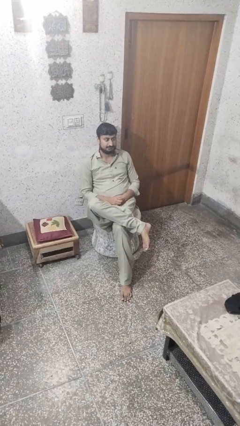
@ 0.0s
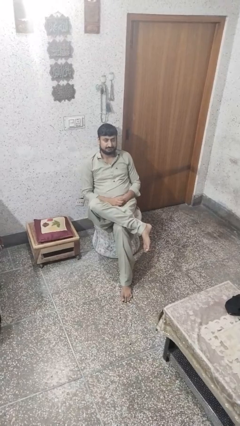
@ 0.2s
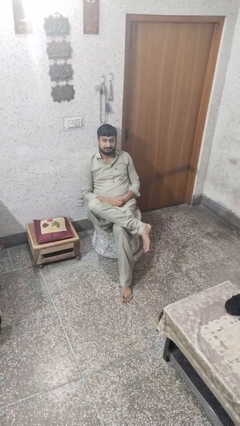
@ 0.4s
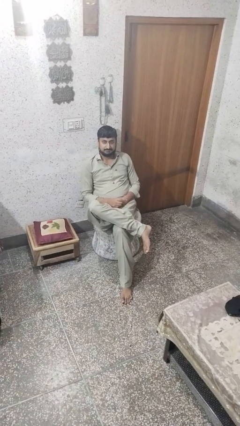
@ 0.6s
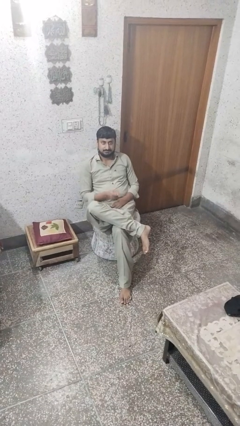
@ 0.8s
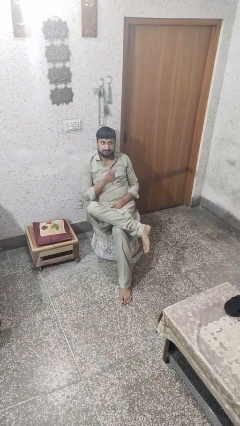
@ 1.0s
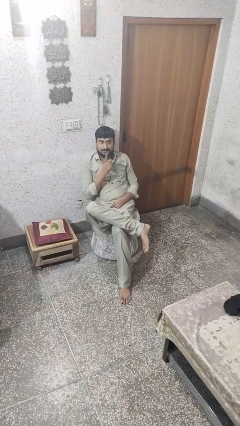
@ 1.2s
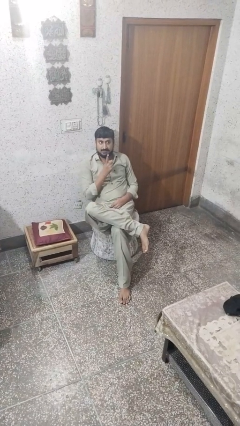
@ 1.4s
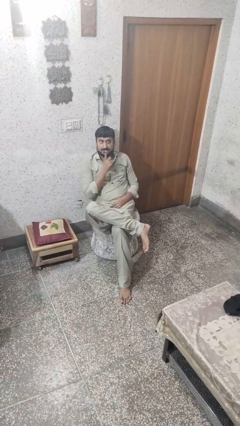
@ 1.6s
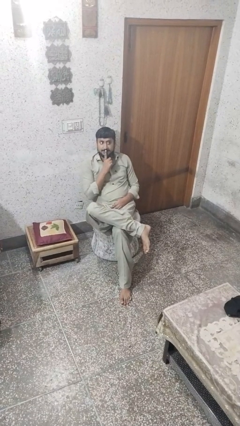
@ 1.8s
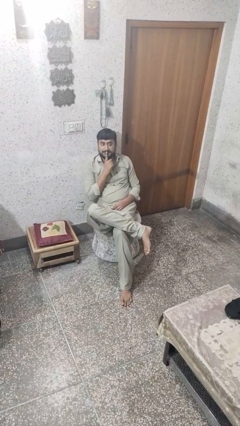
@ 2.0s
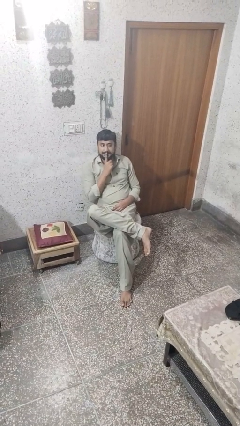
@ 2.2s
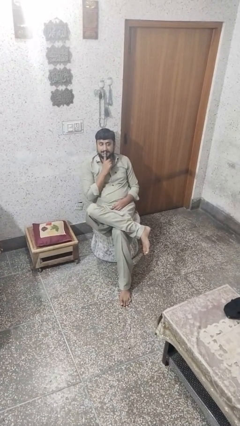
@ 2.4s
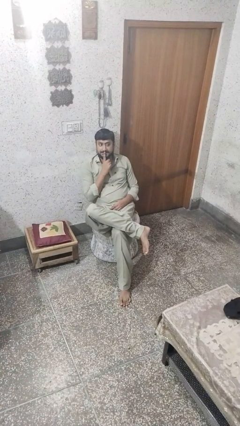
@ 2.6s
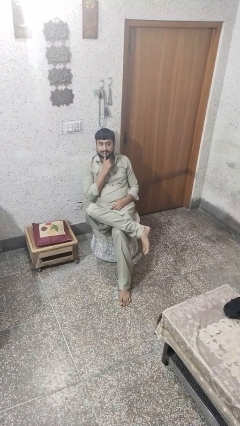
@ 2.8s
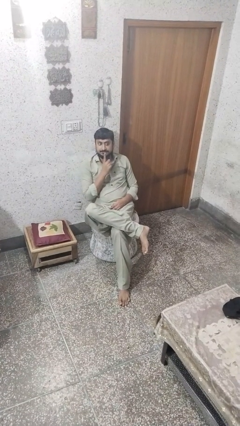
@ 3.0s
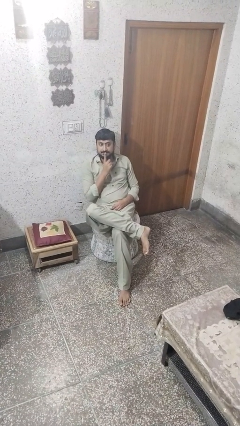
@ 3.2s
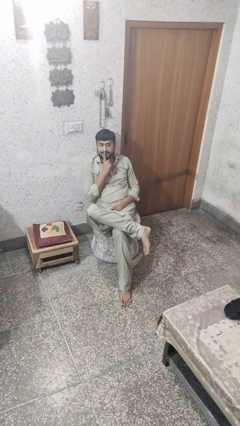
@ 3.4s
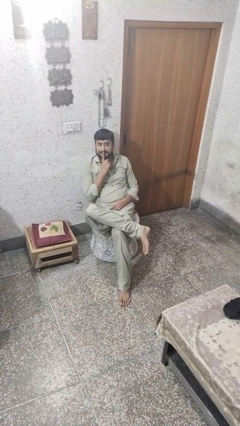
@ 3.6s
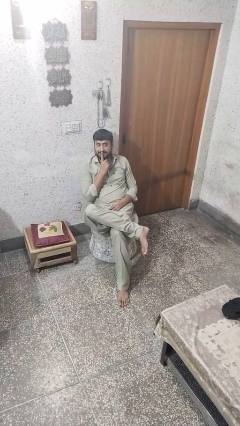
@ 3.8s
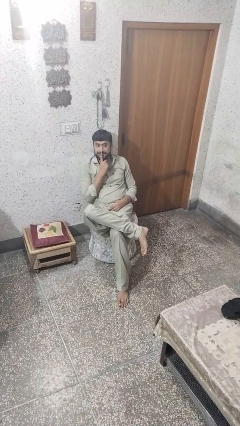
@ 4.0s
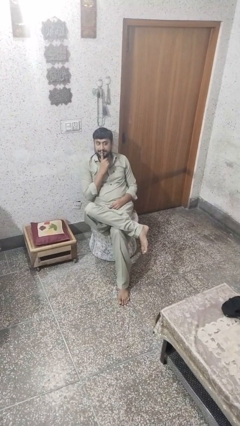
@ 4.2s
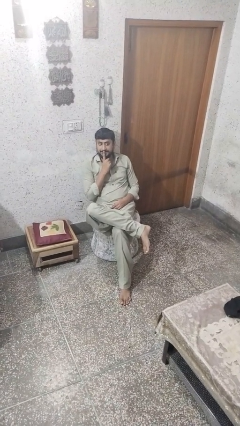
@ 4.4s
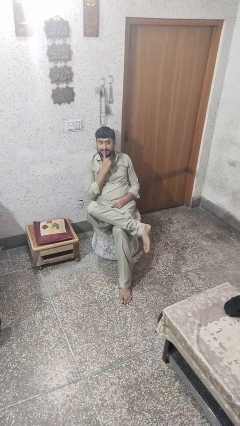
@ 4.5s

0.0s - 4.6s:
person gestures be quiet

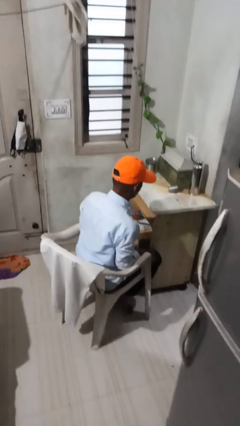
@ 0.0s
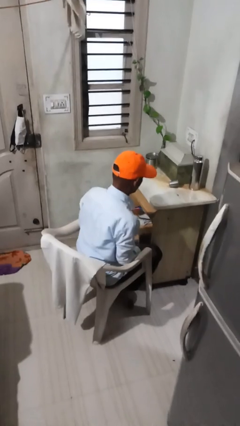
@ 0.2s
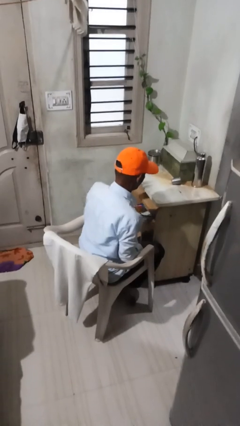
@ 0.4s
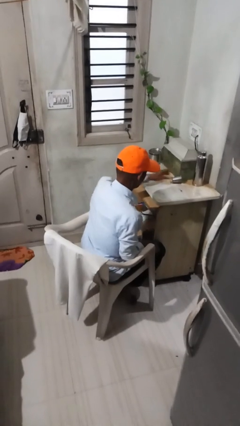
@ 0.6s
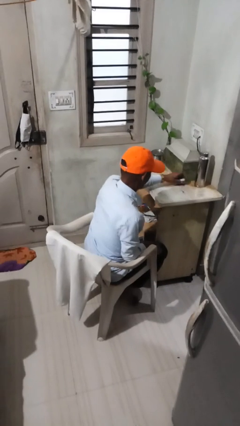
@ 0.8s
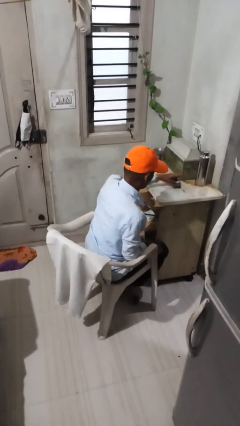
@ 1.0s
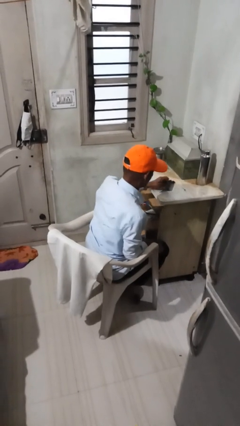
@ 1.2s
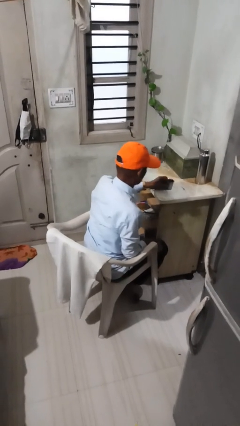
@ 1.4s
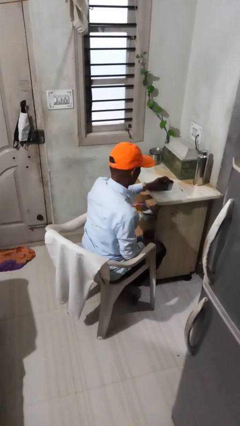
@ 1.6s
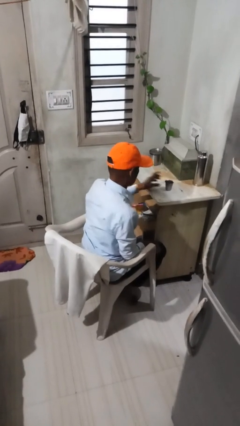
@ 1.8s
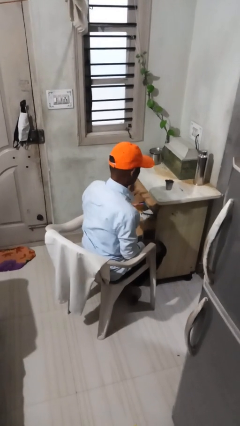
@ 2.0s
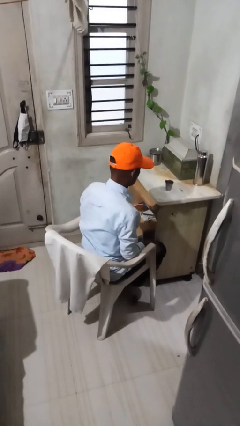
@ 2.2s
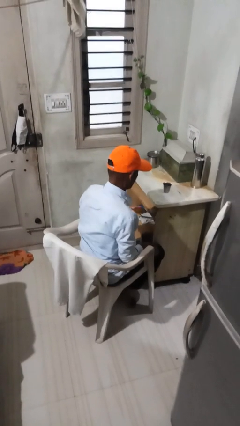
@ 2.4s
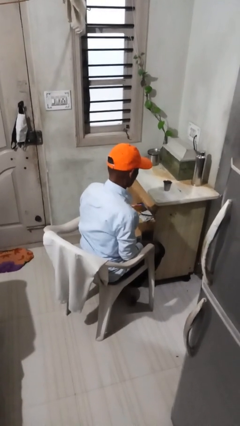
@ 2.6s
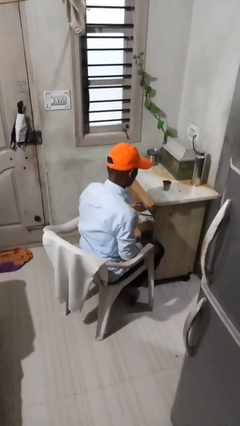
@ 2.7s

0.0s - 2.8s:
person sets upright glass

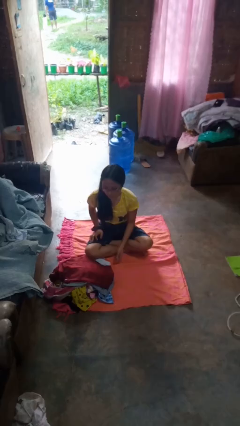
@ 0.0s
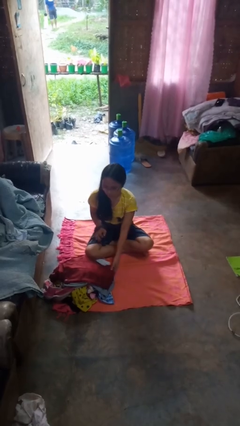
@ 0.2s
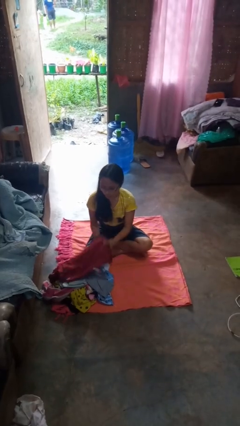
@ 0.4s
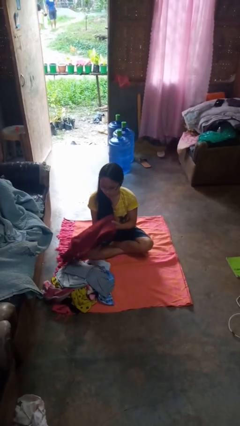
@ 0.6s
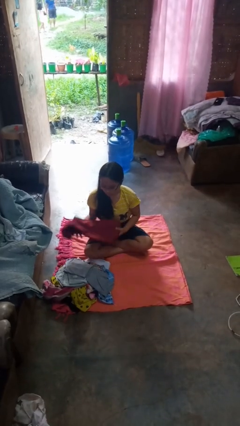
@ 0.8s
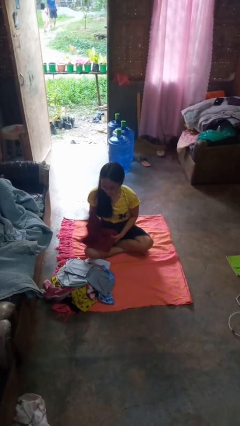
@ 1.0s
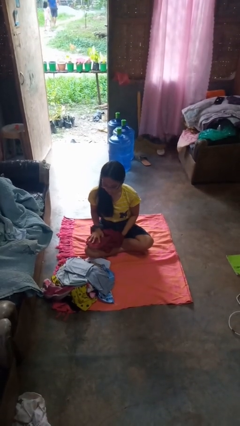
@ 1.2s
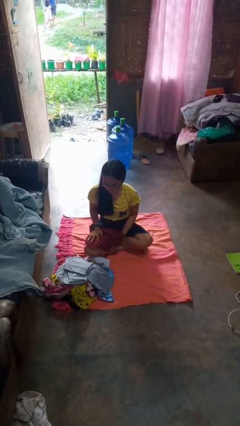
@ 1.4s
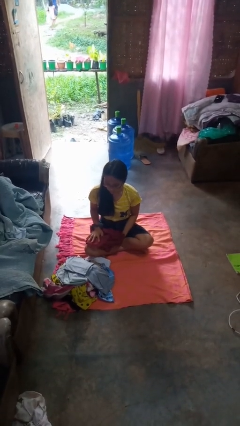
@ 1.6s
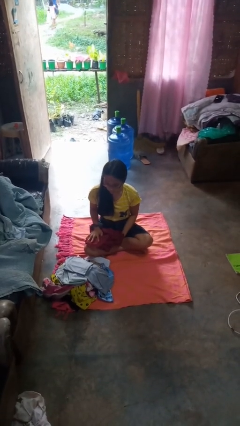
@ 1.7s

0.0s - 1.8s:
person folds pants

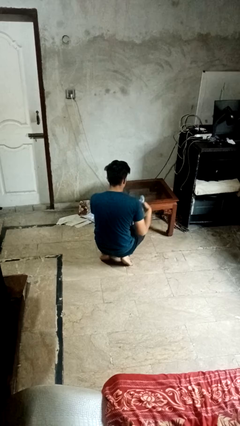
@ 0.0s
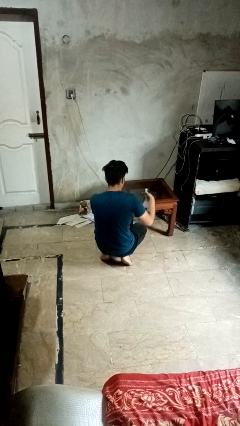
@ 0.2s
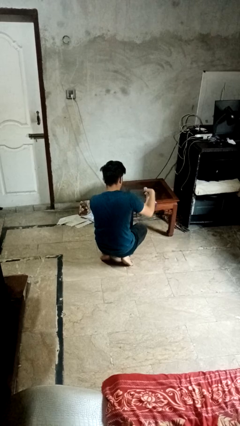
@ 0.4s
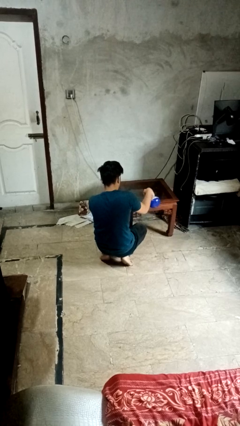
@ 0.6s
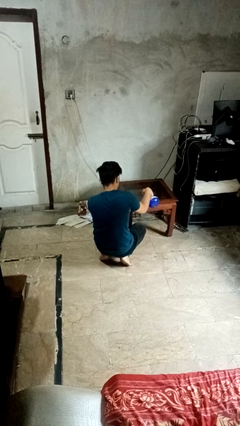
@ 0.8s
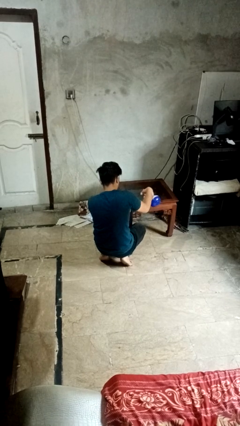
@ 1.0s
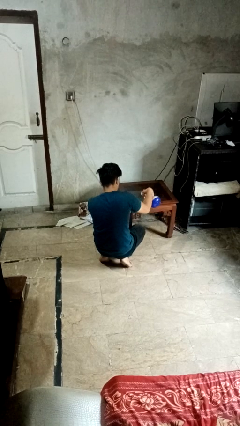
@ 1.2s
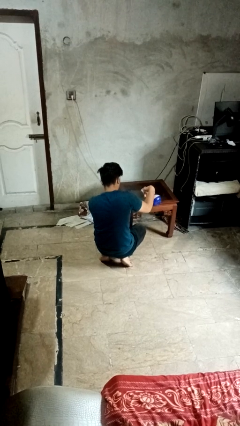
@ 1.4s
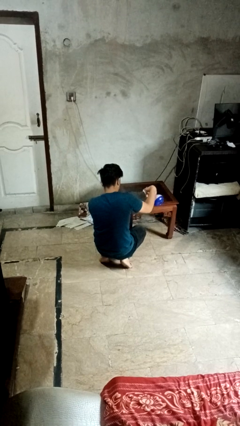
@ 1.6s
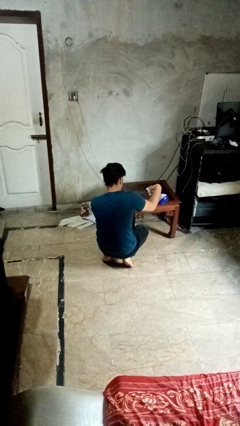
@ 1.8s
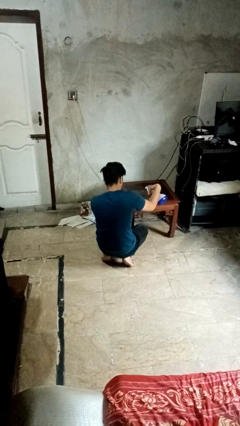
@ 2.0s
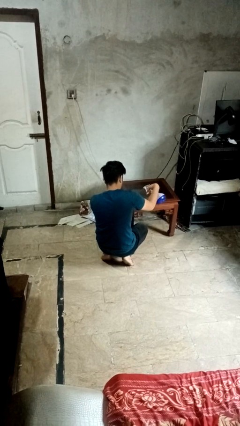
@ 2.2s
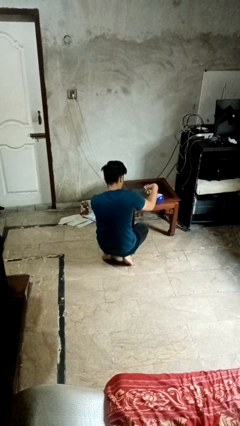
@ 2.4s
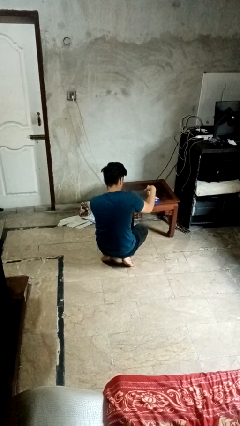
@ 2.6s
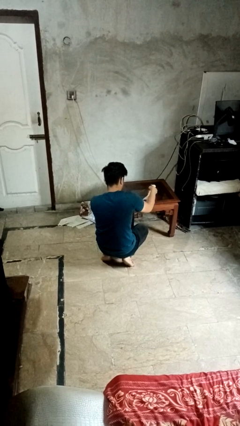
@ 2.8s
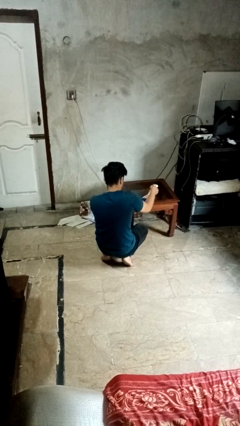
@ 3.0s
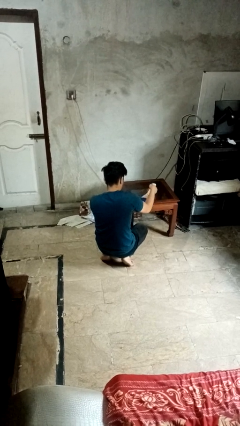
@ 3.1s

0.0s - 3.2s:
person sprays from bottle

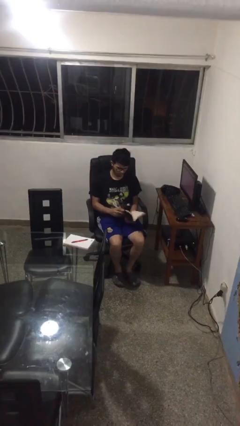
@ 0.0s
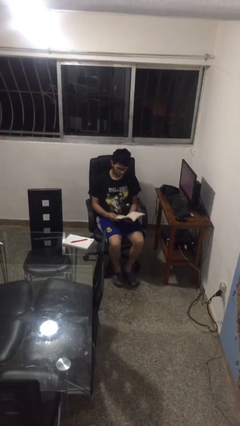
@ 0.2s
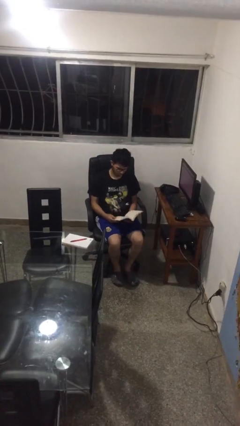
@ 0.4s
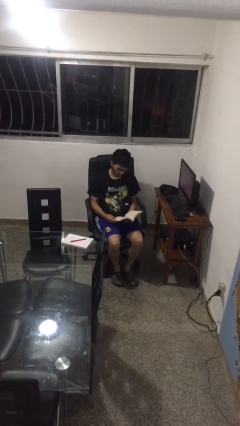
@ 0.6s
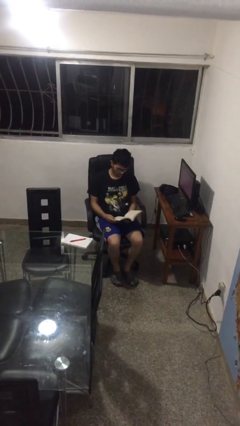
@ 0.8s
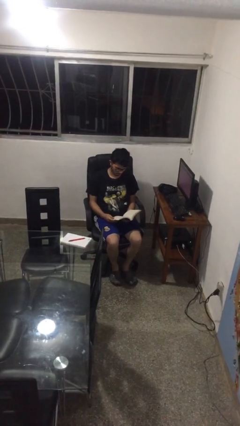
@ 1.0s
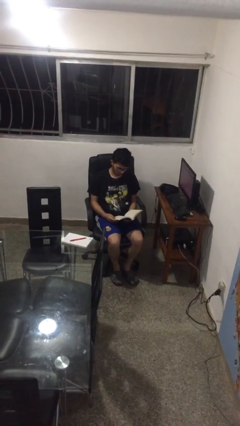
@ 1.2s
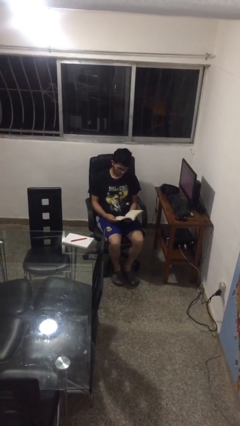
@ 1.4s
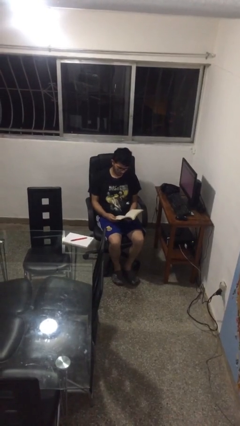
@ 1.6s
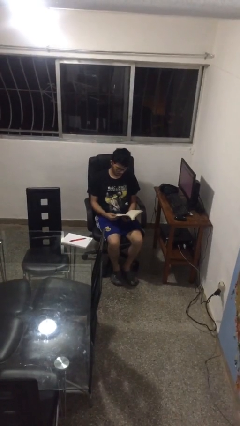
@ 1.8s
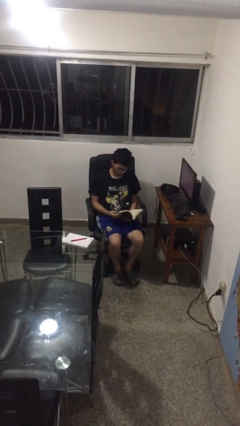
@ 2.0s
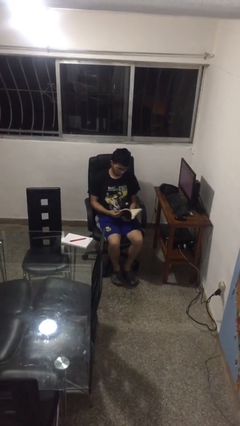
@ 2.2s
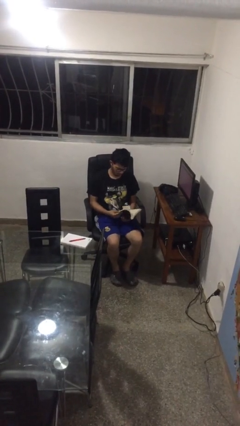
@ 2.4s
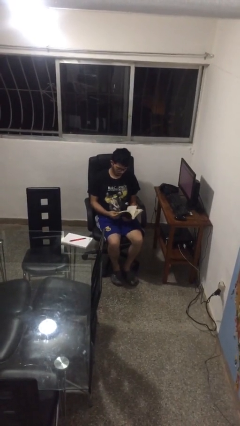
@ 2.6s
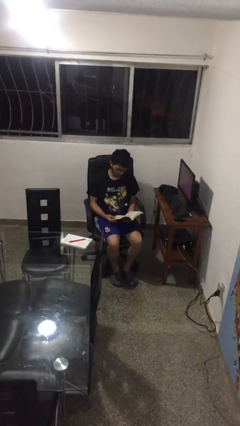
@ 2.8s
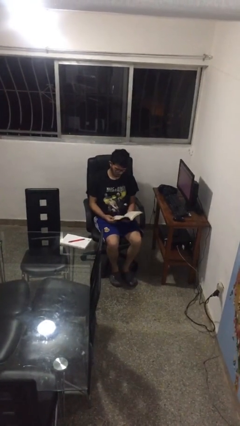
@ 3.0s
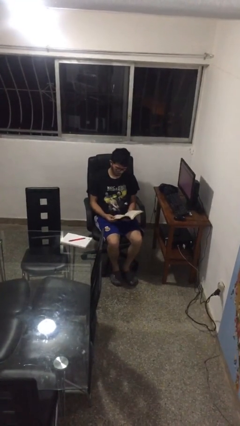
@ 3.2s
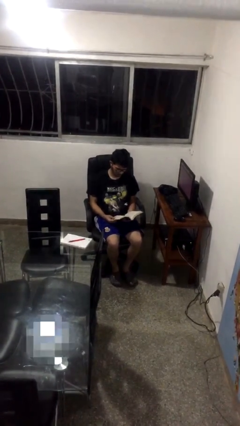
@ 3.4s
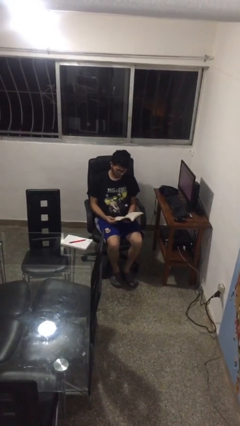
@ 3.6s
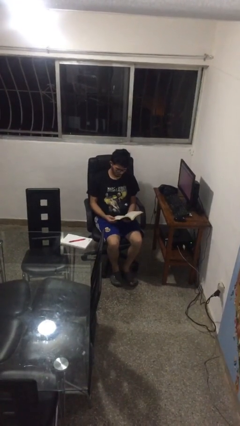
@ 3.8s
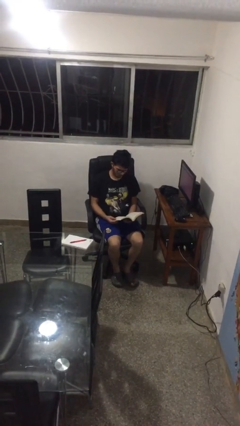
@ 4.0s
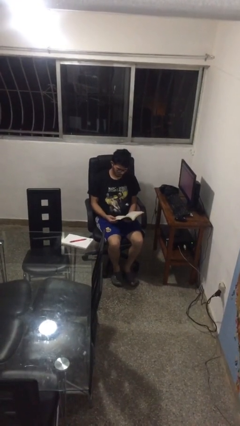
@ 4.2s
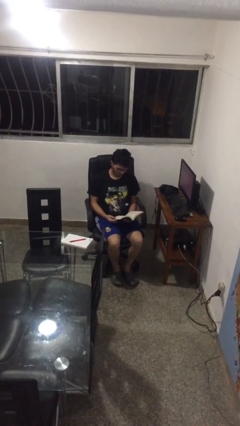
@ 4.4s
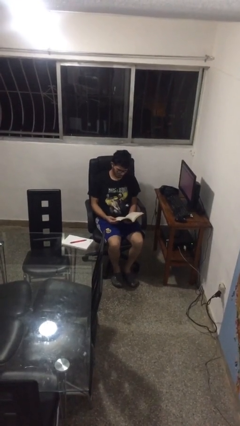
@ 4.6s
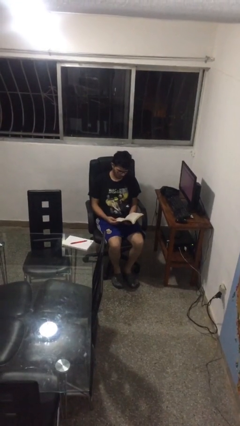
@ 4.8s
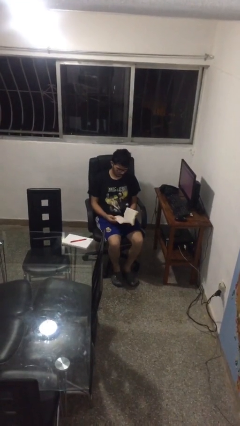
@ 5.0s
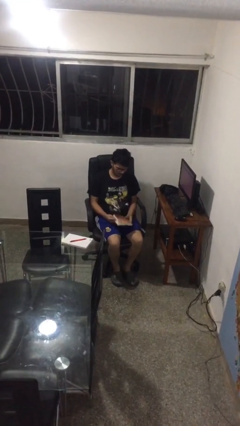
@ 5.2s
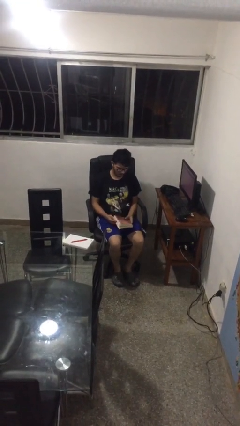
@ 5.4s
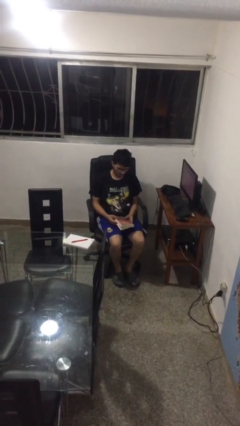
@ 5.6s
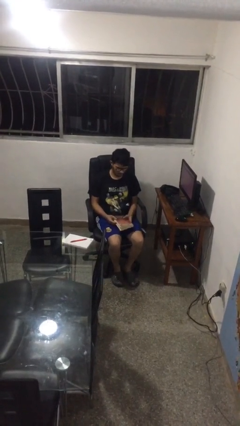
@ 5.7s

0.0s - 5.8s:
person reads book
